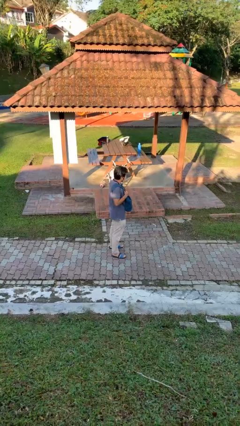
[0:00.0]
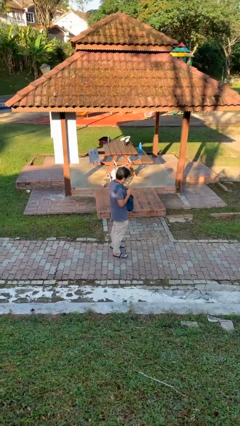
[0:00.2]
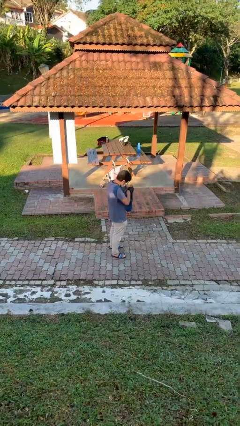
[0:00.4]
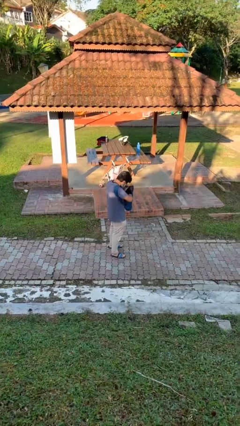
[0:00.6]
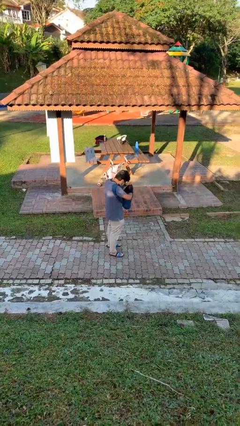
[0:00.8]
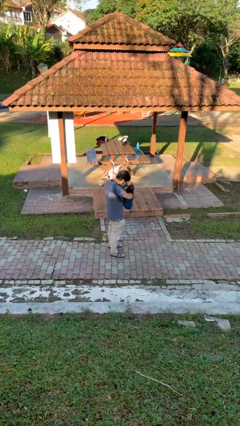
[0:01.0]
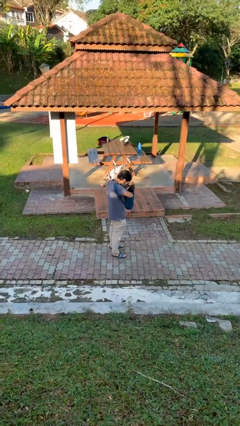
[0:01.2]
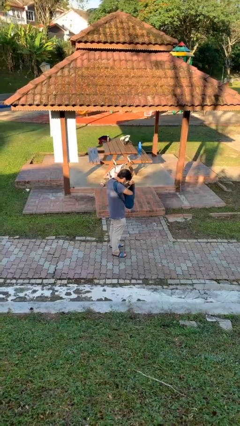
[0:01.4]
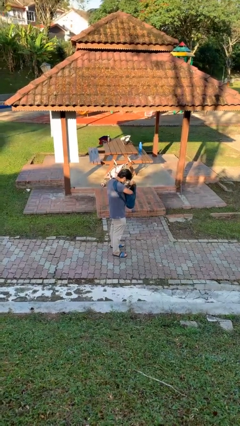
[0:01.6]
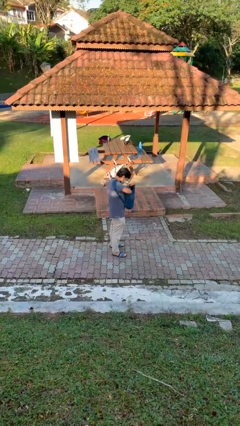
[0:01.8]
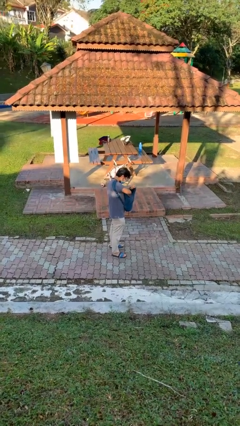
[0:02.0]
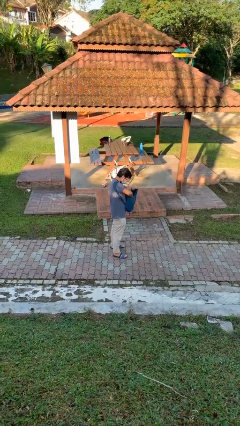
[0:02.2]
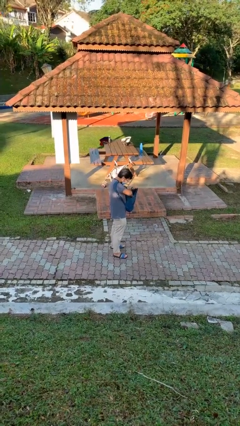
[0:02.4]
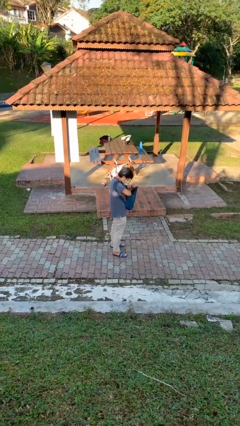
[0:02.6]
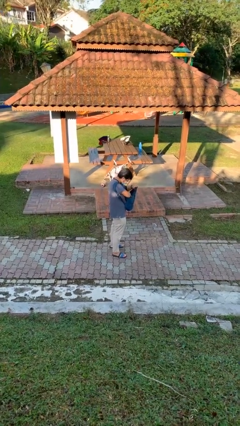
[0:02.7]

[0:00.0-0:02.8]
person searches in backpack

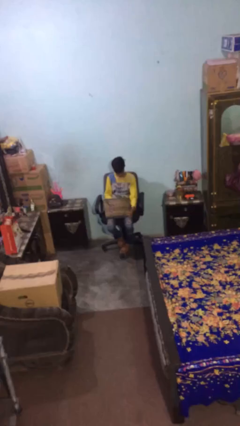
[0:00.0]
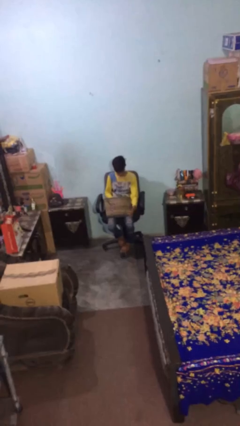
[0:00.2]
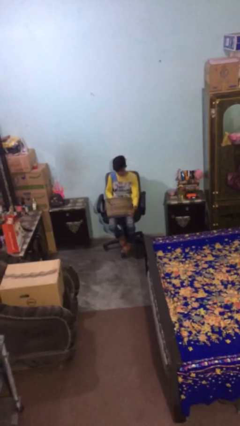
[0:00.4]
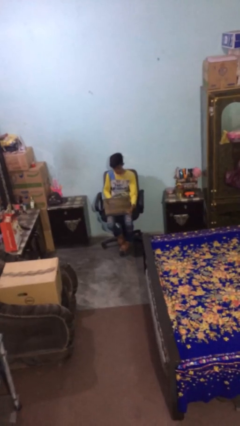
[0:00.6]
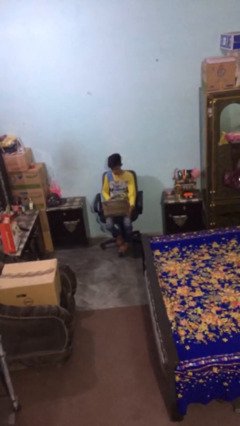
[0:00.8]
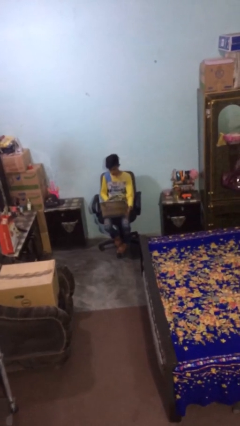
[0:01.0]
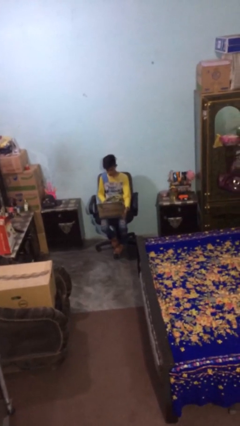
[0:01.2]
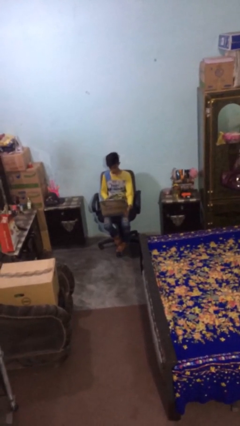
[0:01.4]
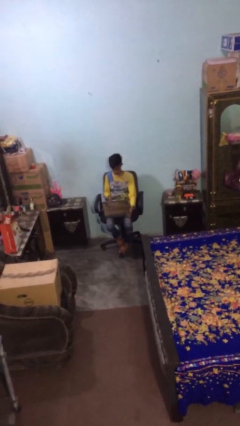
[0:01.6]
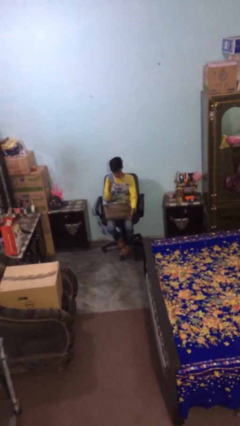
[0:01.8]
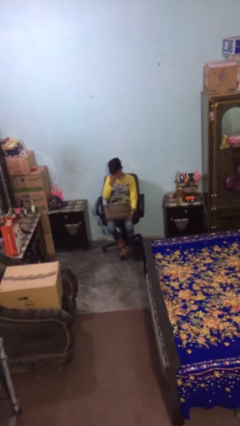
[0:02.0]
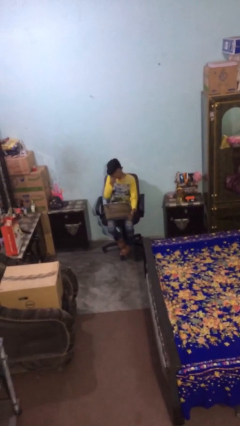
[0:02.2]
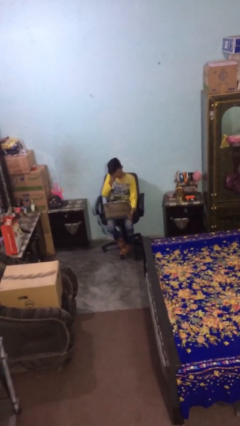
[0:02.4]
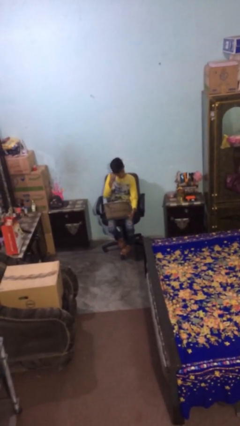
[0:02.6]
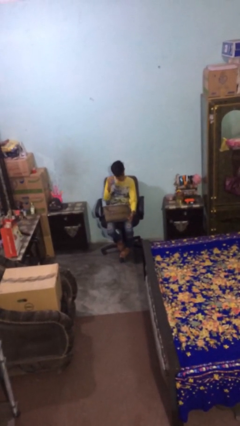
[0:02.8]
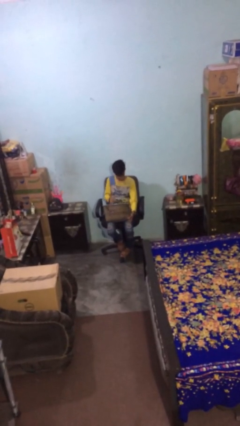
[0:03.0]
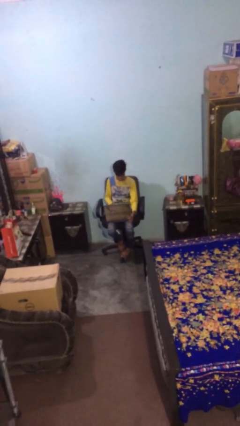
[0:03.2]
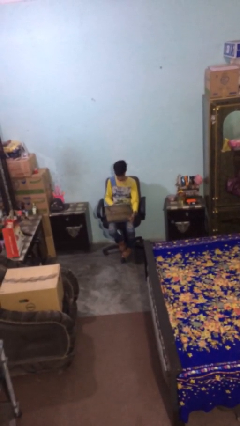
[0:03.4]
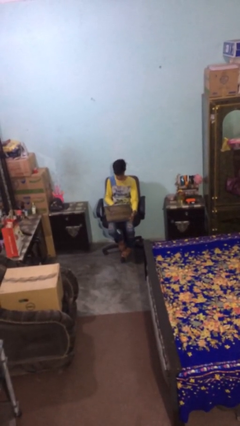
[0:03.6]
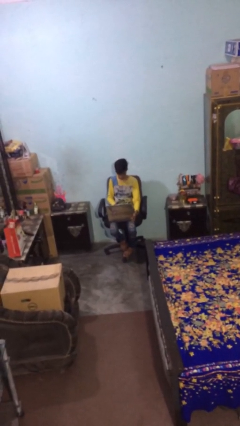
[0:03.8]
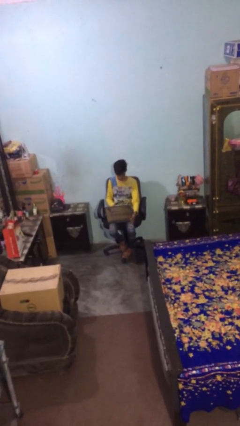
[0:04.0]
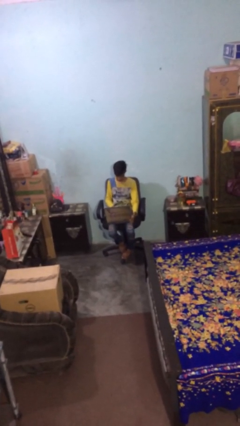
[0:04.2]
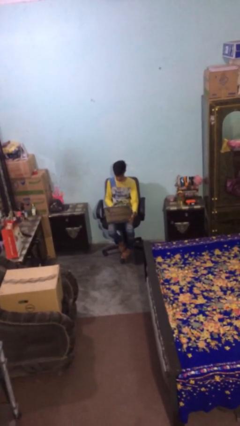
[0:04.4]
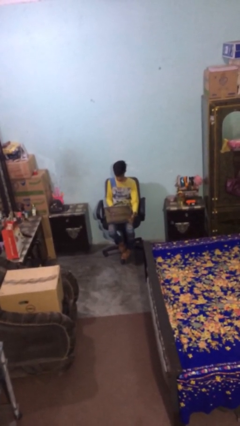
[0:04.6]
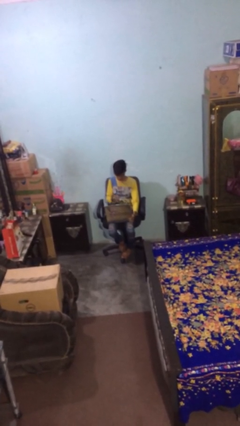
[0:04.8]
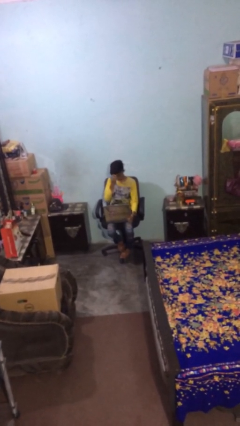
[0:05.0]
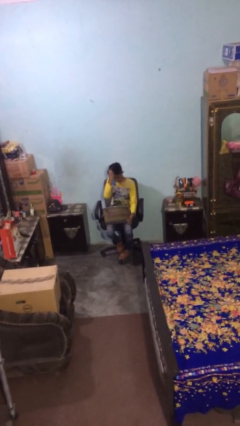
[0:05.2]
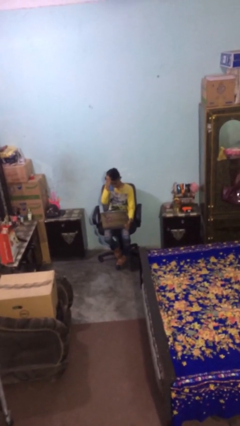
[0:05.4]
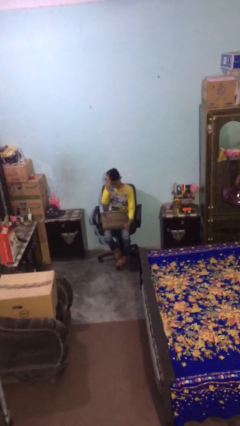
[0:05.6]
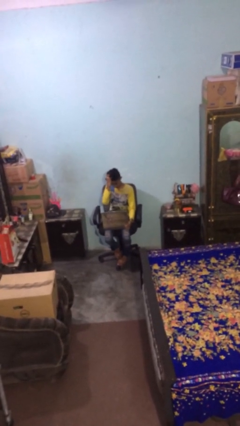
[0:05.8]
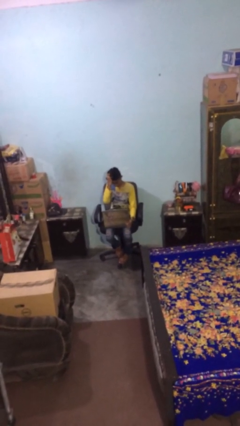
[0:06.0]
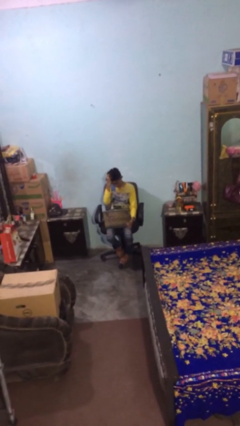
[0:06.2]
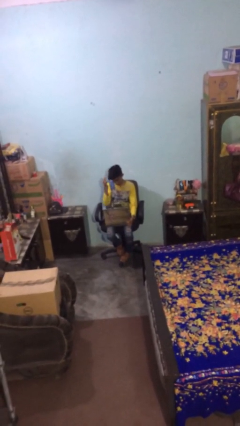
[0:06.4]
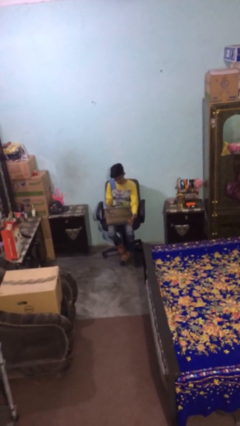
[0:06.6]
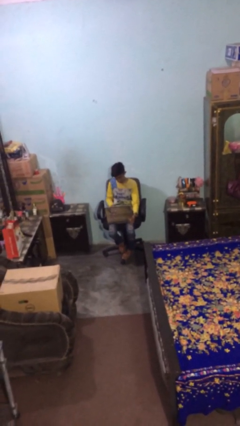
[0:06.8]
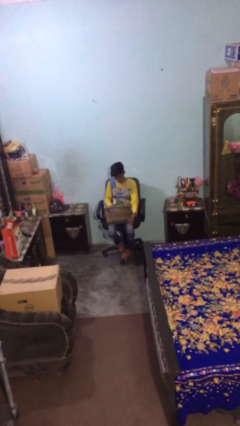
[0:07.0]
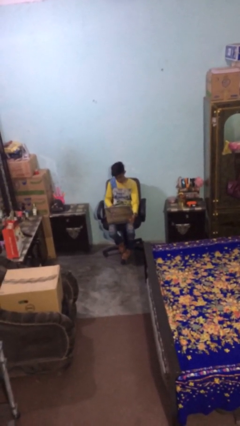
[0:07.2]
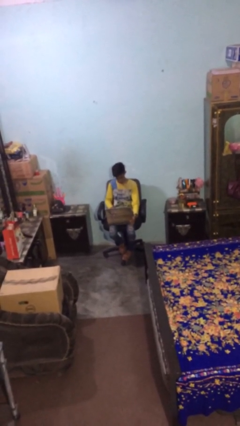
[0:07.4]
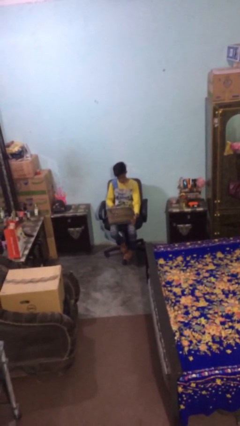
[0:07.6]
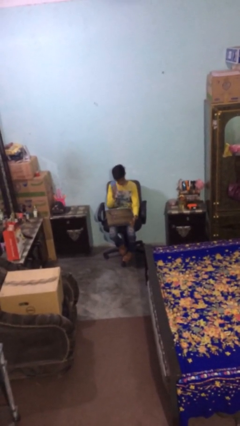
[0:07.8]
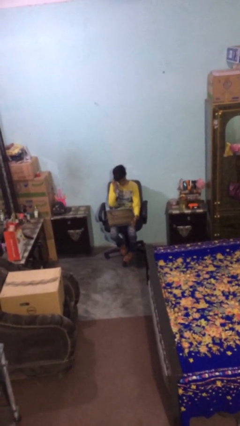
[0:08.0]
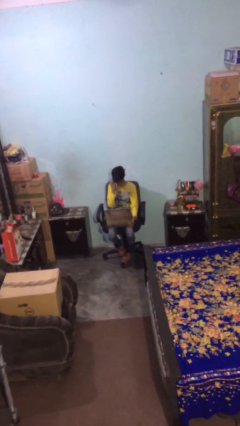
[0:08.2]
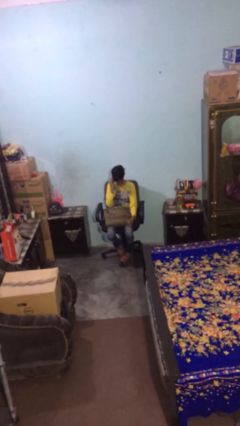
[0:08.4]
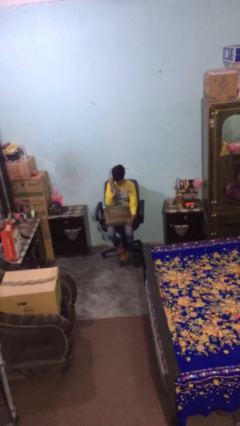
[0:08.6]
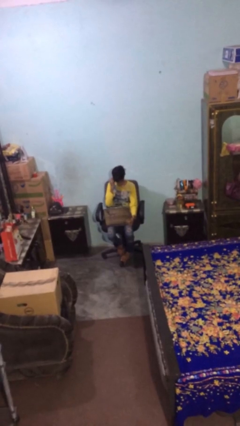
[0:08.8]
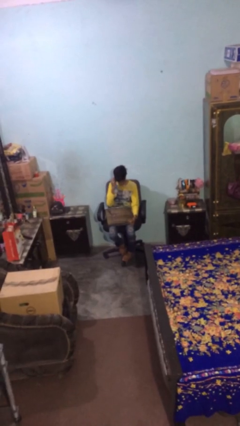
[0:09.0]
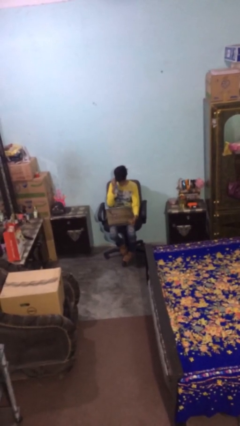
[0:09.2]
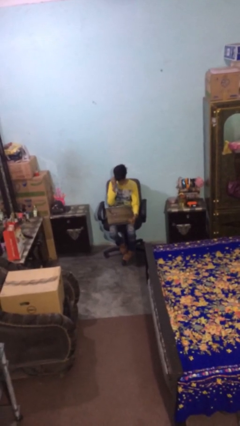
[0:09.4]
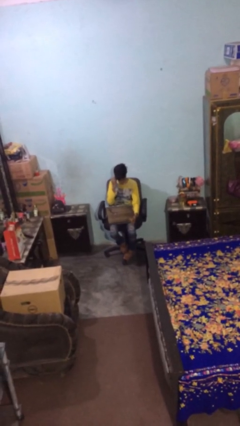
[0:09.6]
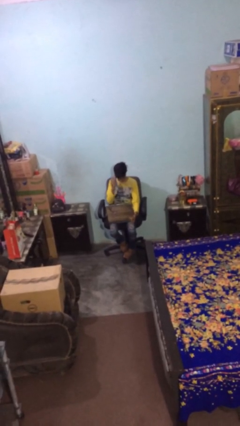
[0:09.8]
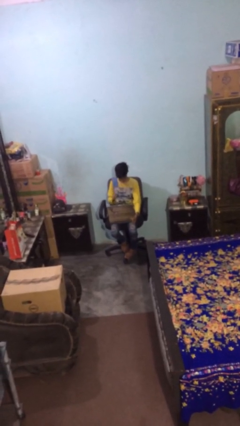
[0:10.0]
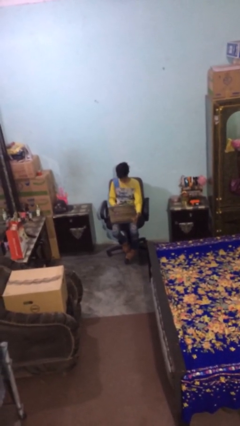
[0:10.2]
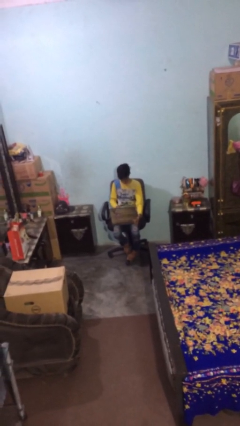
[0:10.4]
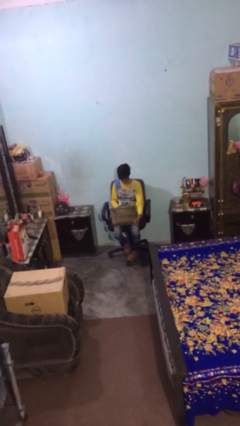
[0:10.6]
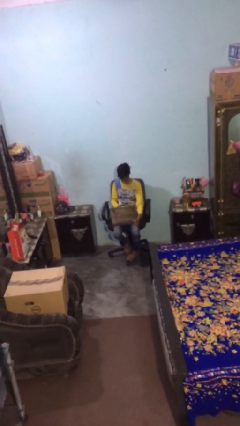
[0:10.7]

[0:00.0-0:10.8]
person interacts with laptop

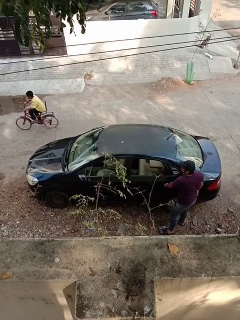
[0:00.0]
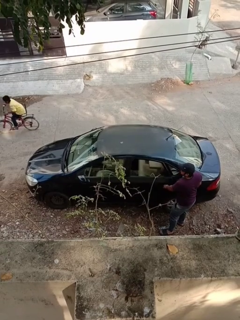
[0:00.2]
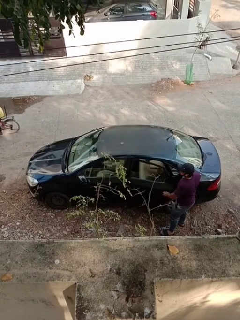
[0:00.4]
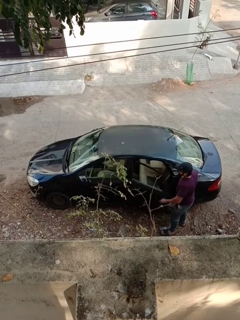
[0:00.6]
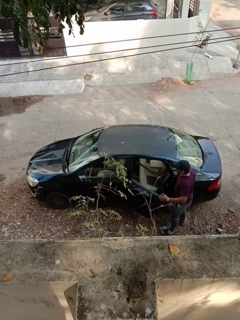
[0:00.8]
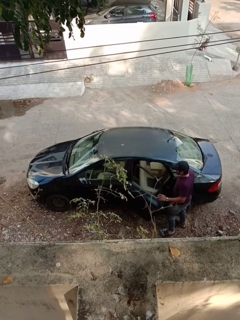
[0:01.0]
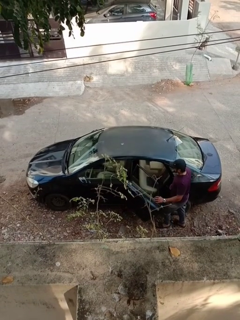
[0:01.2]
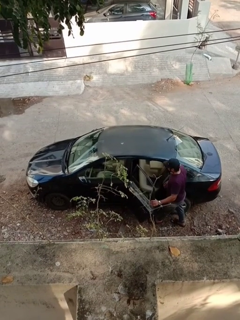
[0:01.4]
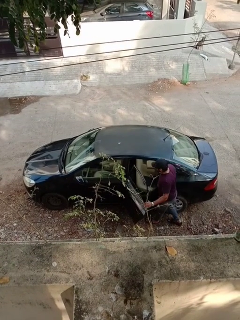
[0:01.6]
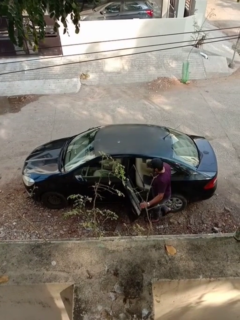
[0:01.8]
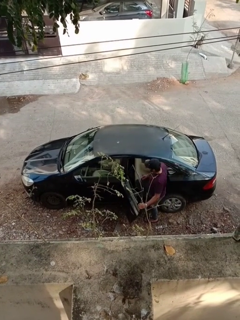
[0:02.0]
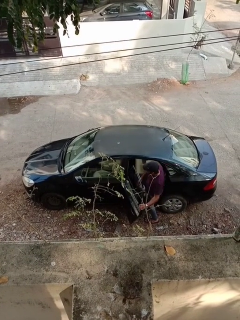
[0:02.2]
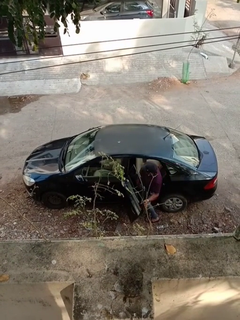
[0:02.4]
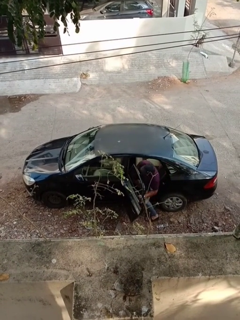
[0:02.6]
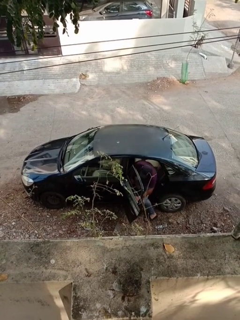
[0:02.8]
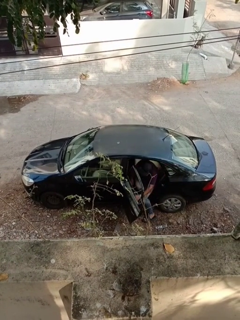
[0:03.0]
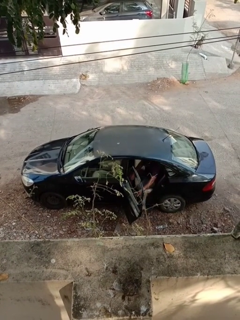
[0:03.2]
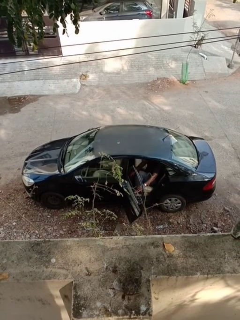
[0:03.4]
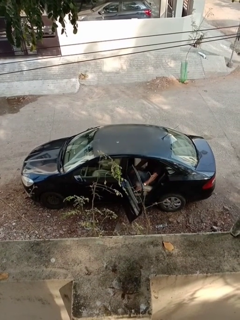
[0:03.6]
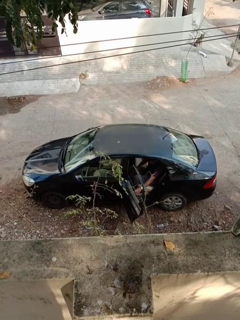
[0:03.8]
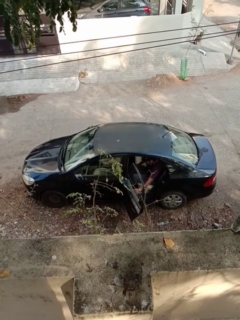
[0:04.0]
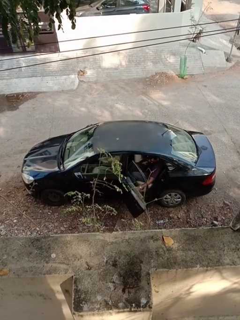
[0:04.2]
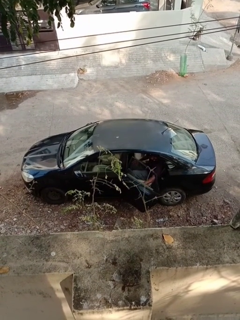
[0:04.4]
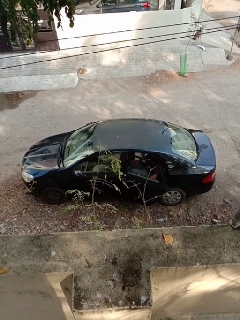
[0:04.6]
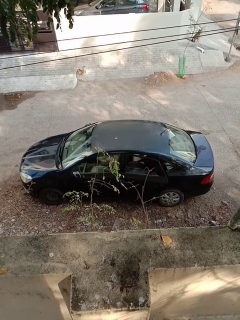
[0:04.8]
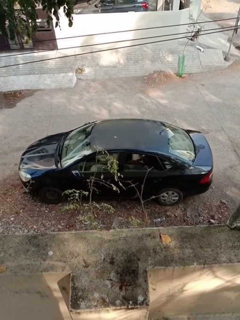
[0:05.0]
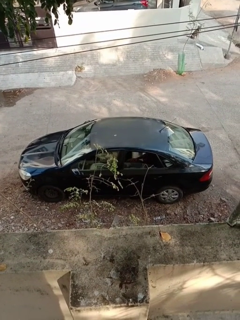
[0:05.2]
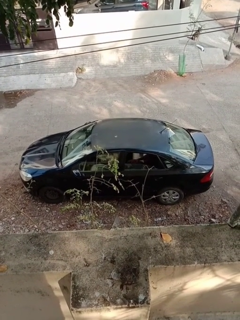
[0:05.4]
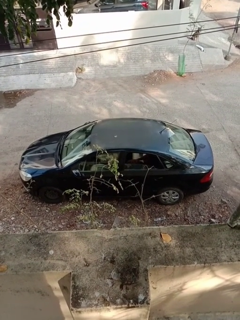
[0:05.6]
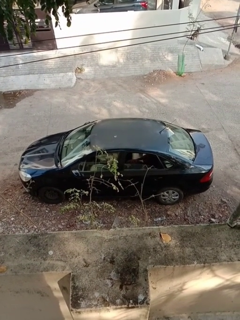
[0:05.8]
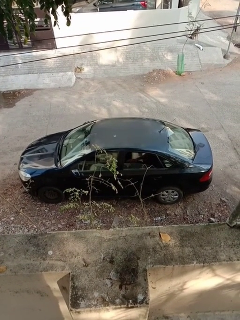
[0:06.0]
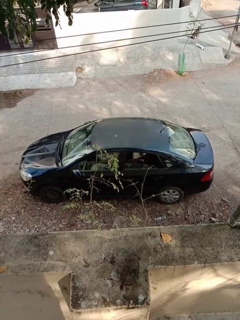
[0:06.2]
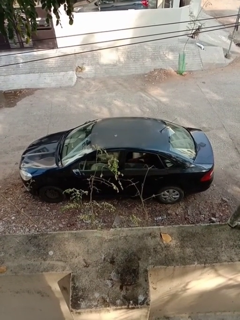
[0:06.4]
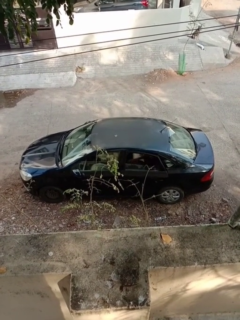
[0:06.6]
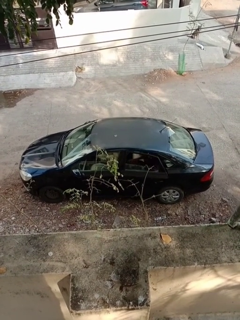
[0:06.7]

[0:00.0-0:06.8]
car picks up person
